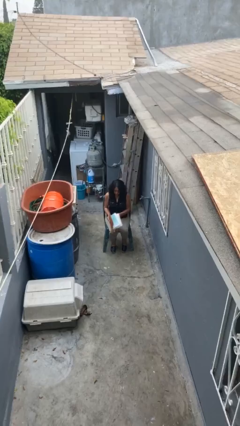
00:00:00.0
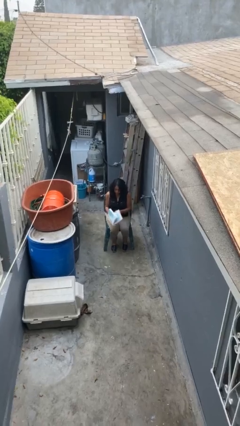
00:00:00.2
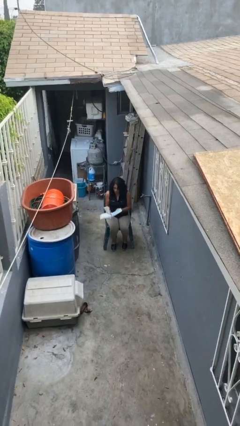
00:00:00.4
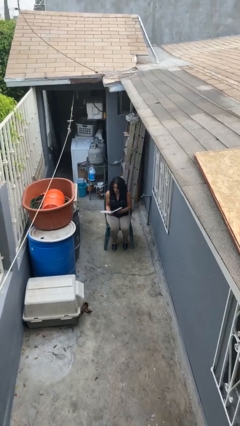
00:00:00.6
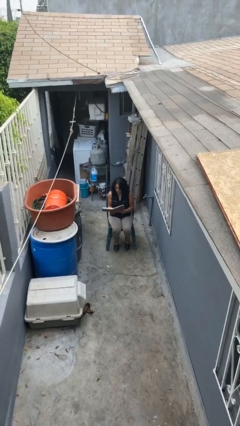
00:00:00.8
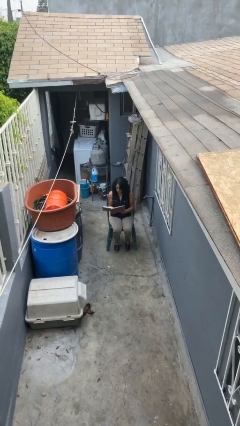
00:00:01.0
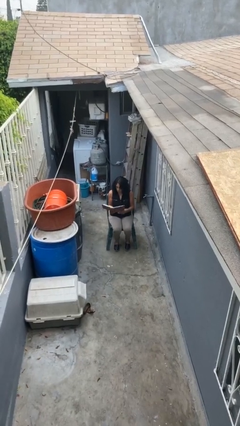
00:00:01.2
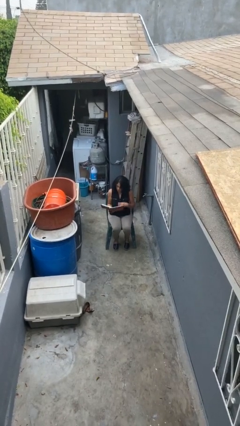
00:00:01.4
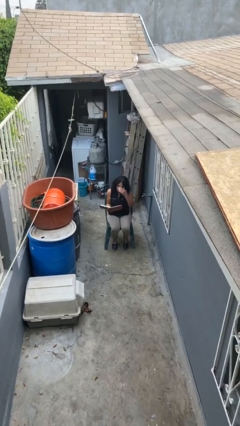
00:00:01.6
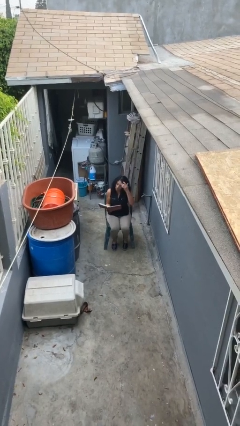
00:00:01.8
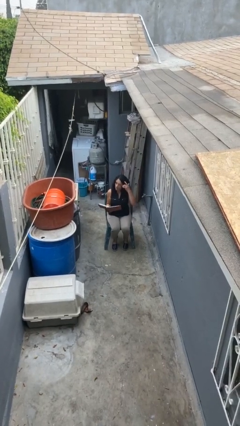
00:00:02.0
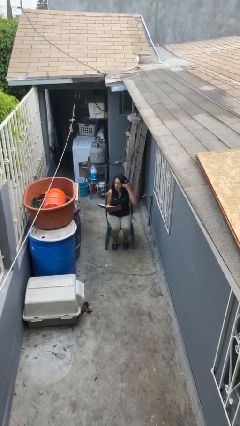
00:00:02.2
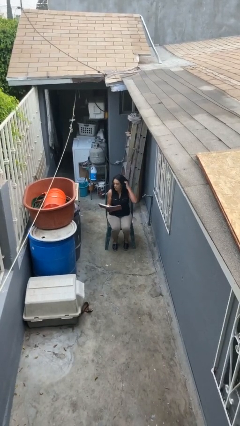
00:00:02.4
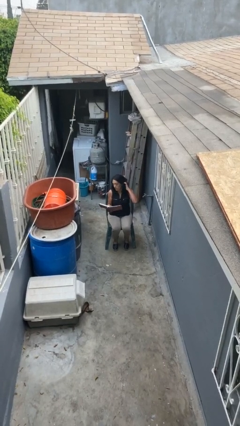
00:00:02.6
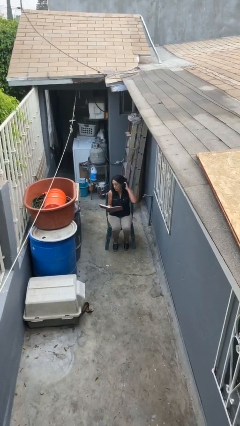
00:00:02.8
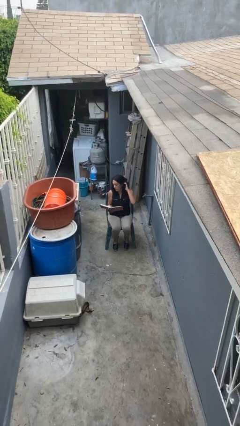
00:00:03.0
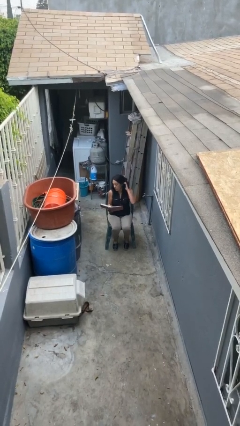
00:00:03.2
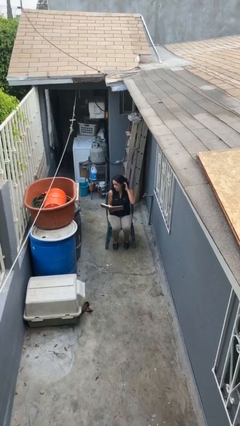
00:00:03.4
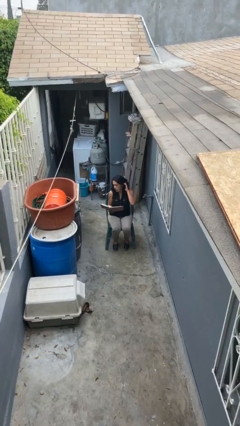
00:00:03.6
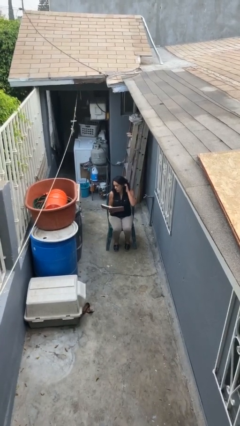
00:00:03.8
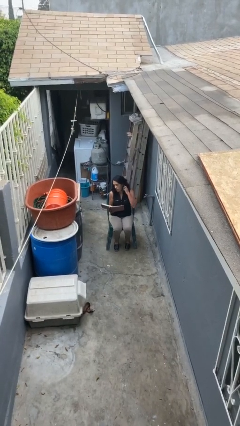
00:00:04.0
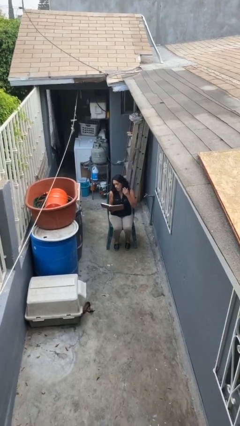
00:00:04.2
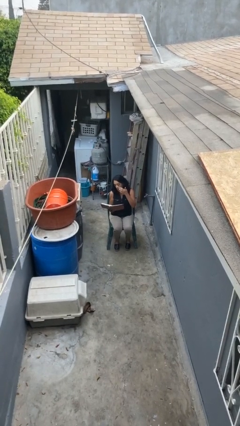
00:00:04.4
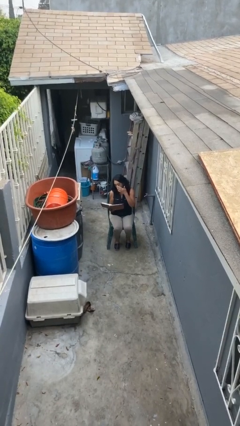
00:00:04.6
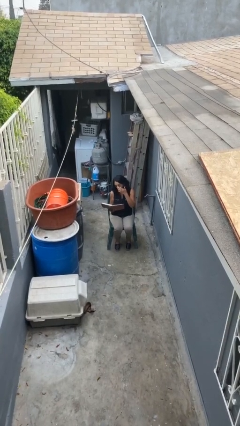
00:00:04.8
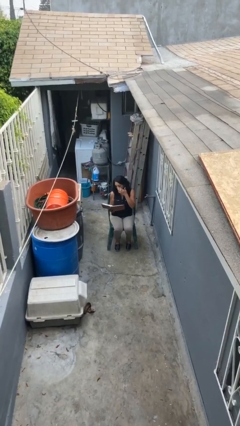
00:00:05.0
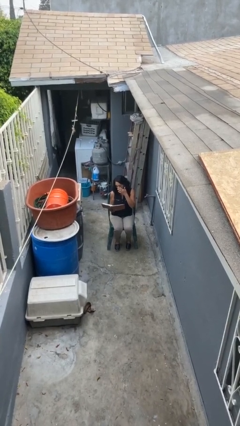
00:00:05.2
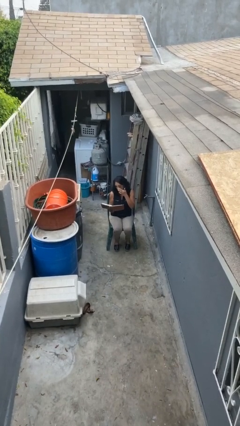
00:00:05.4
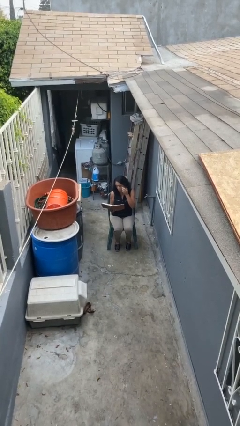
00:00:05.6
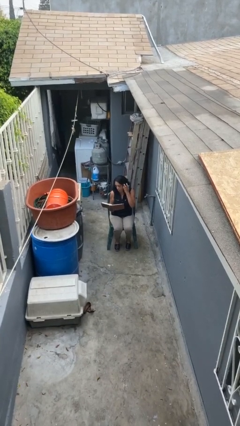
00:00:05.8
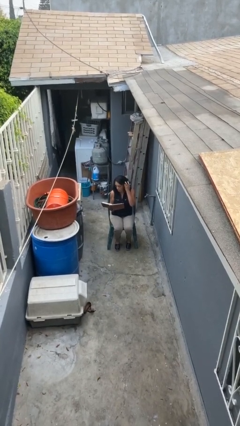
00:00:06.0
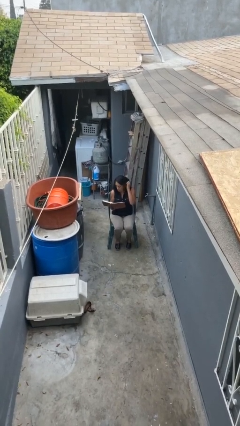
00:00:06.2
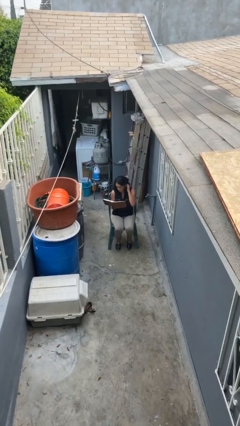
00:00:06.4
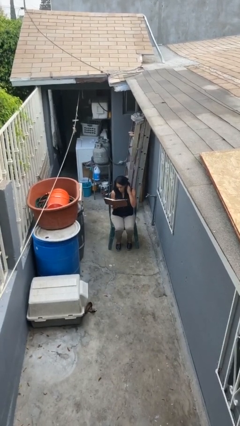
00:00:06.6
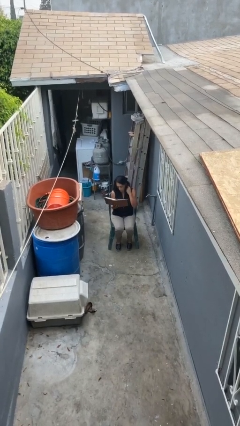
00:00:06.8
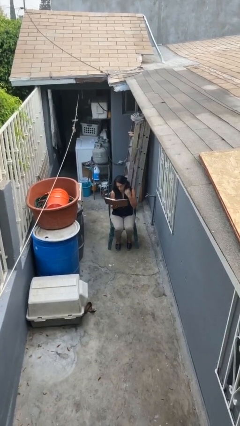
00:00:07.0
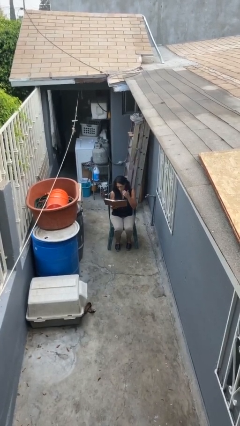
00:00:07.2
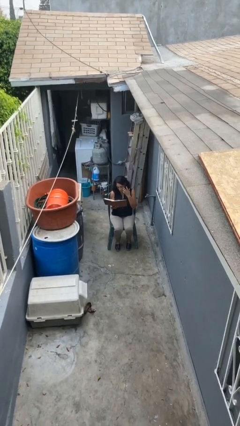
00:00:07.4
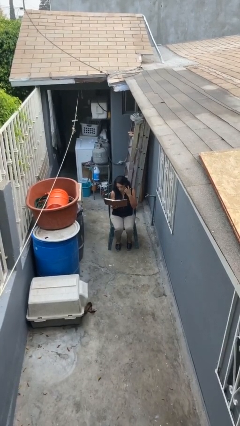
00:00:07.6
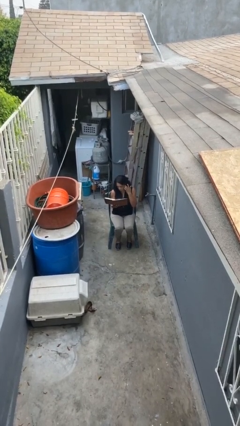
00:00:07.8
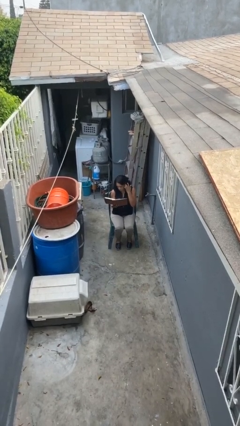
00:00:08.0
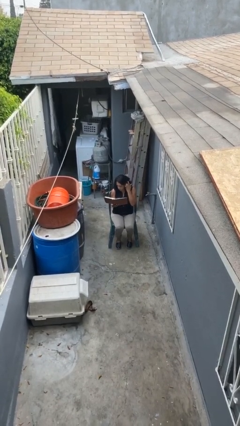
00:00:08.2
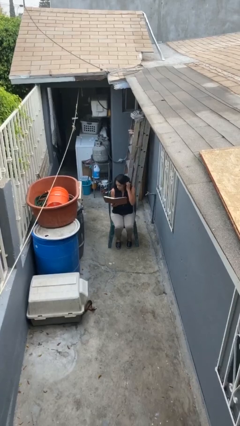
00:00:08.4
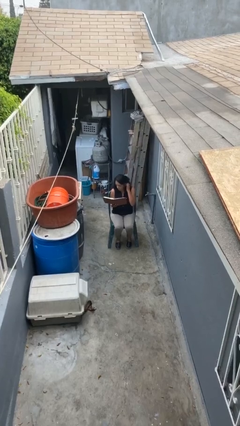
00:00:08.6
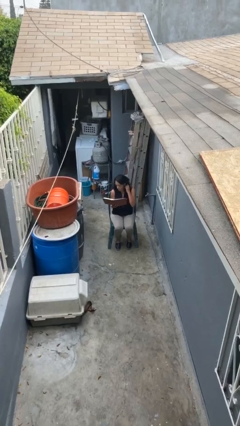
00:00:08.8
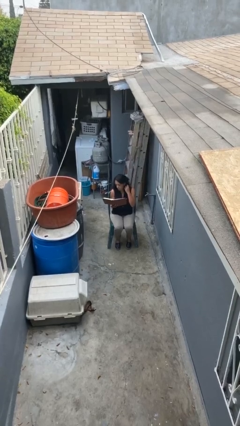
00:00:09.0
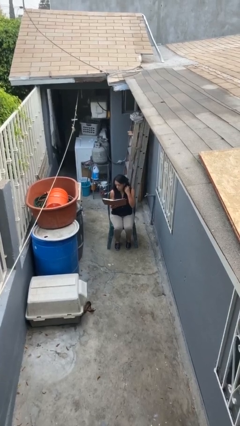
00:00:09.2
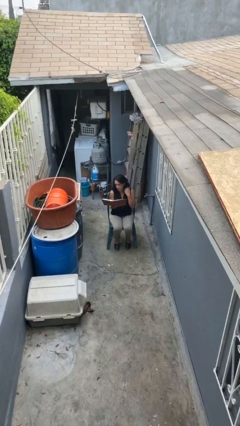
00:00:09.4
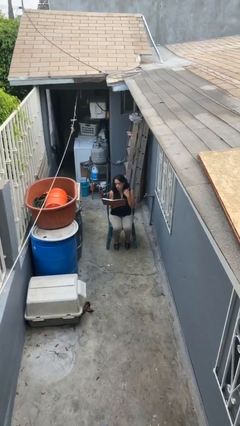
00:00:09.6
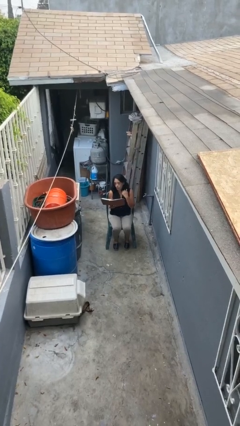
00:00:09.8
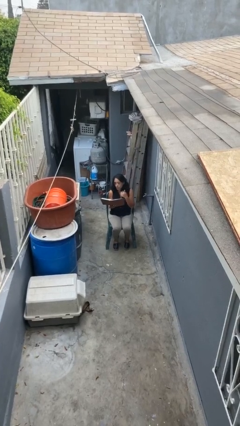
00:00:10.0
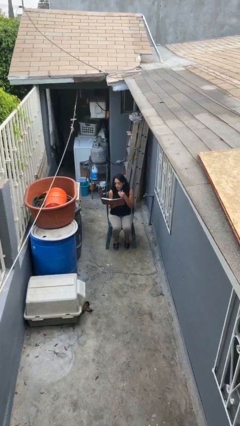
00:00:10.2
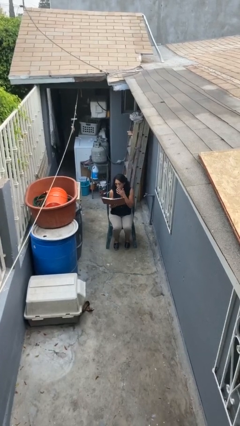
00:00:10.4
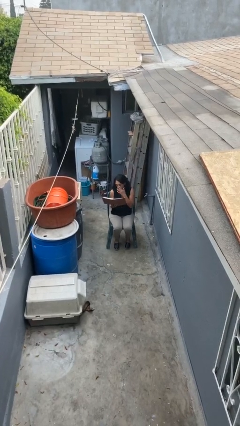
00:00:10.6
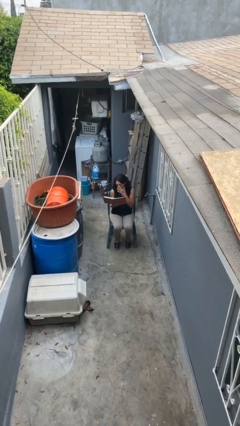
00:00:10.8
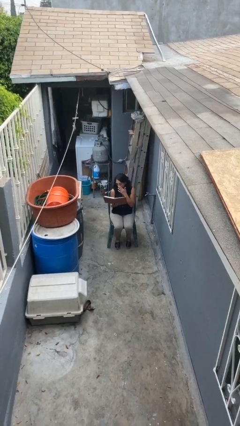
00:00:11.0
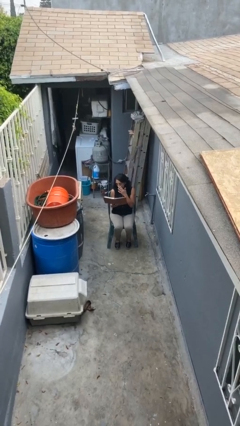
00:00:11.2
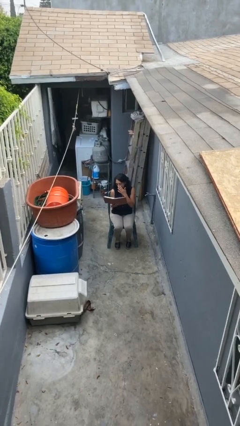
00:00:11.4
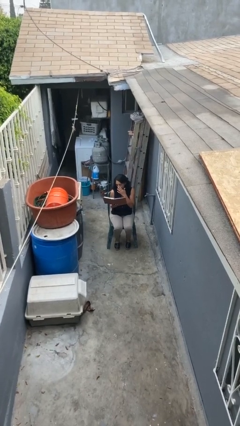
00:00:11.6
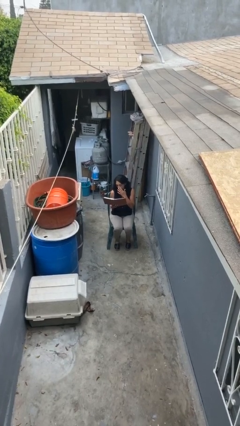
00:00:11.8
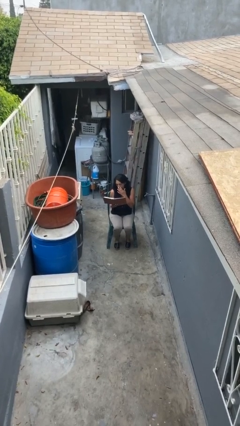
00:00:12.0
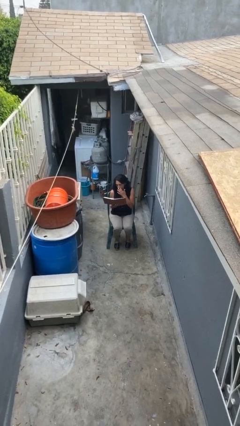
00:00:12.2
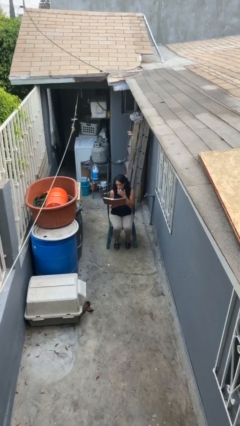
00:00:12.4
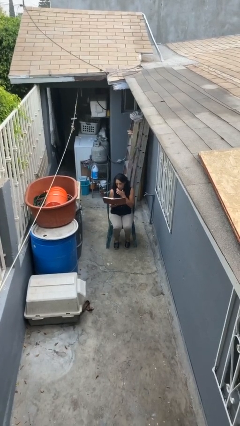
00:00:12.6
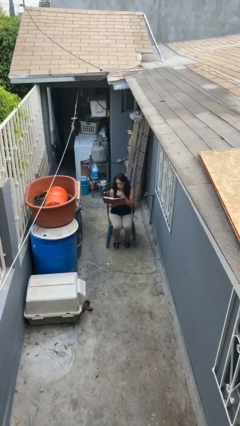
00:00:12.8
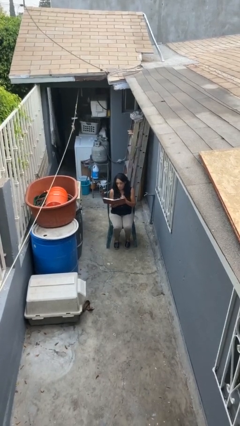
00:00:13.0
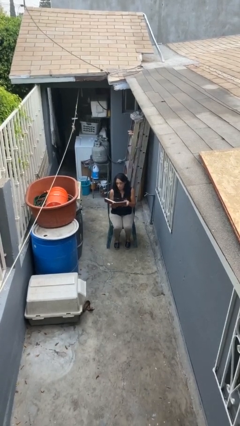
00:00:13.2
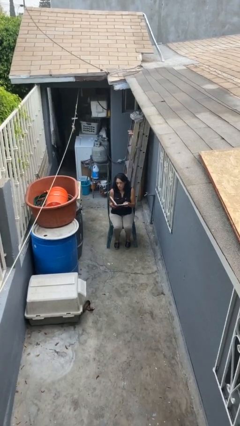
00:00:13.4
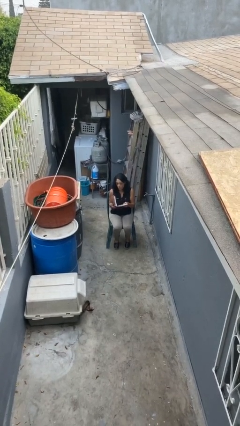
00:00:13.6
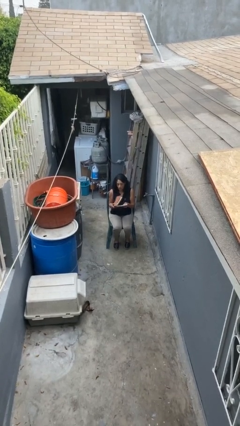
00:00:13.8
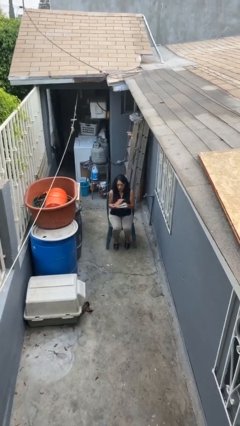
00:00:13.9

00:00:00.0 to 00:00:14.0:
person reads document

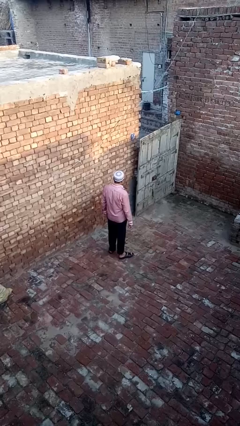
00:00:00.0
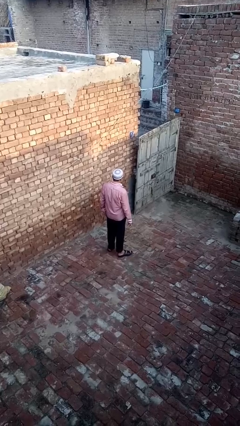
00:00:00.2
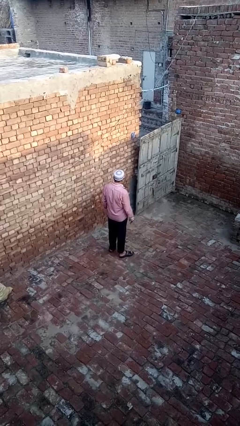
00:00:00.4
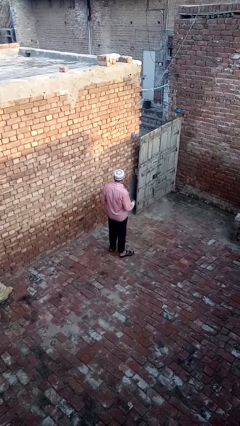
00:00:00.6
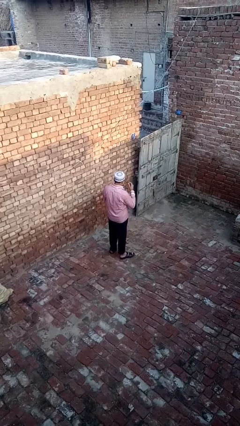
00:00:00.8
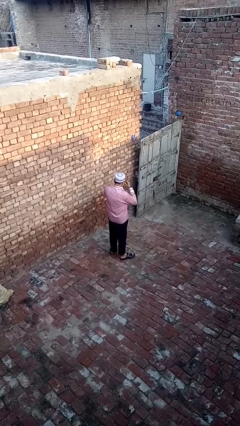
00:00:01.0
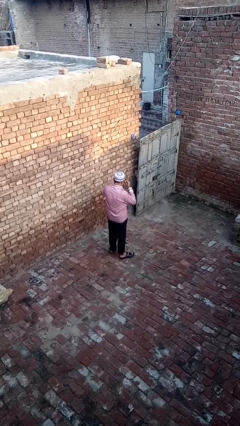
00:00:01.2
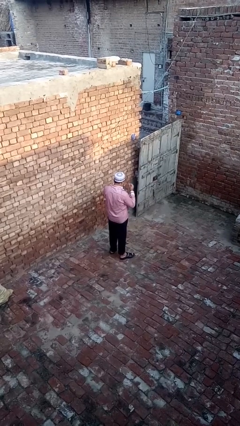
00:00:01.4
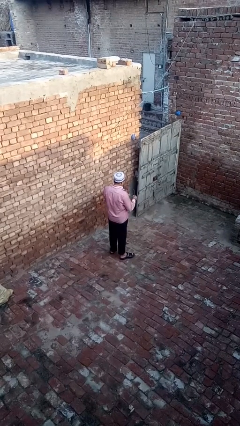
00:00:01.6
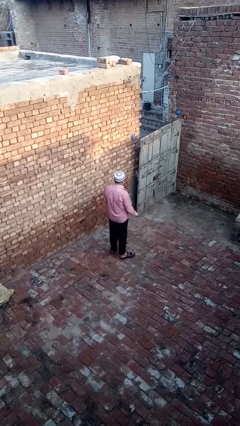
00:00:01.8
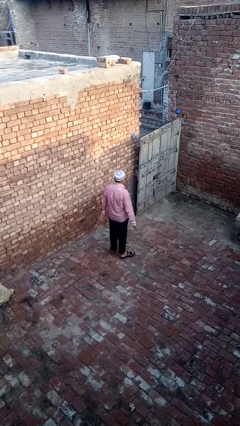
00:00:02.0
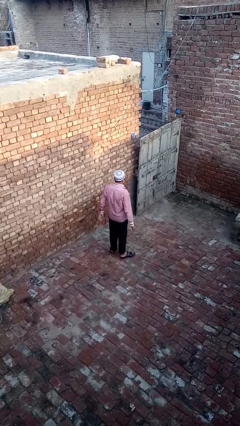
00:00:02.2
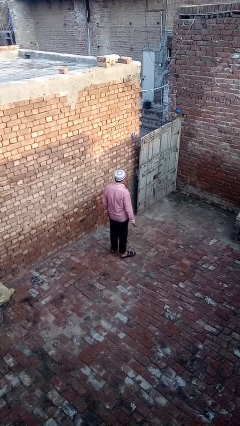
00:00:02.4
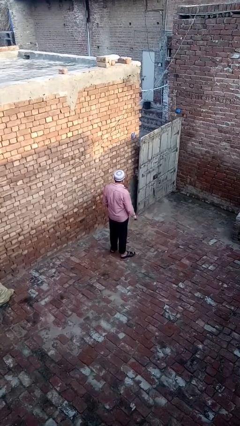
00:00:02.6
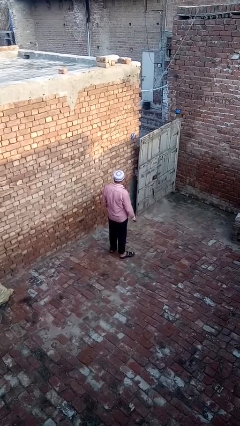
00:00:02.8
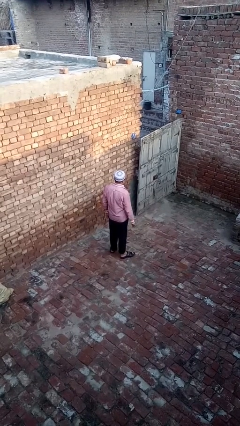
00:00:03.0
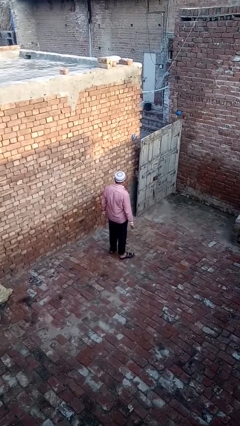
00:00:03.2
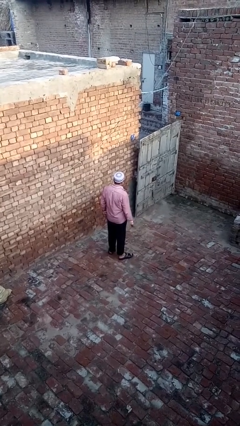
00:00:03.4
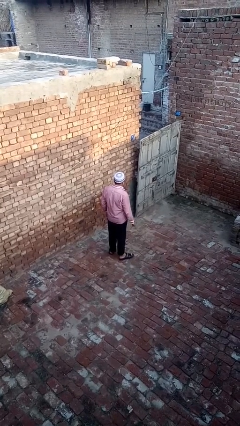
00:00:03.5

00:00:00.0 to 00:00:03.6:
person takes off glasses

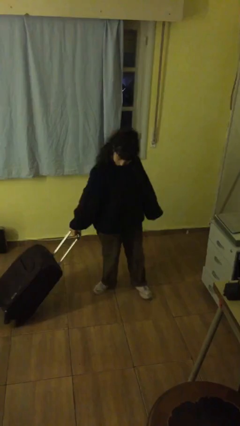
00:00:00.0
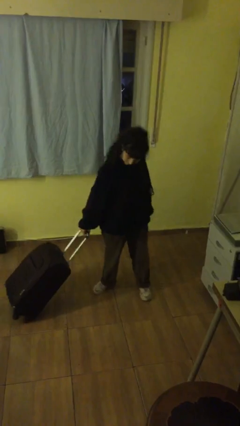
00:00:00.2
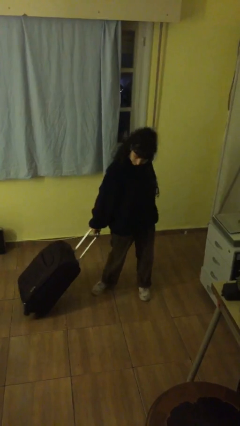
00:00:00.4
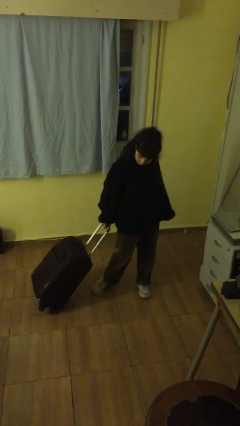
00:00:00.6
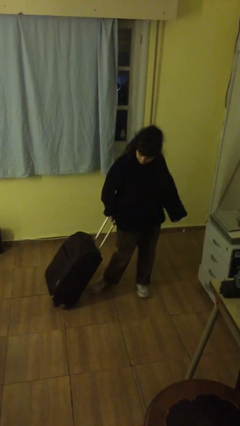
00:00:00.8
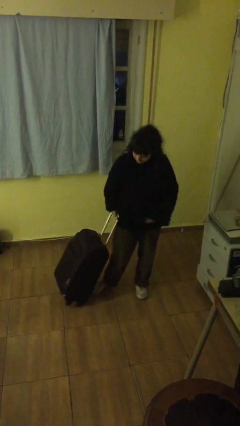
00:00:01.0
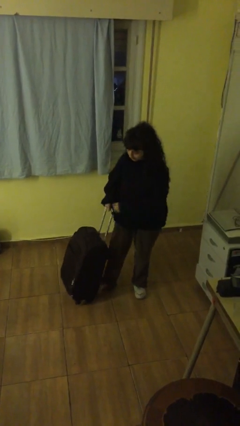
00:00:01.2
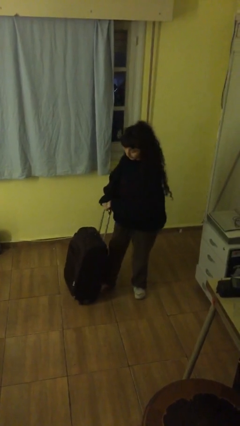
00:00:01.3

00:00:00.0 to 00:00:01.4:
person pulls wheeled cart
